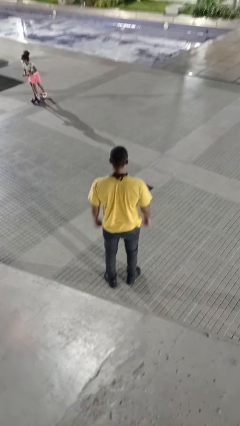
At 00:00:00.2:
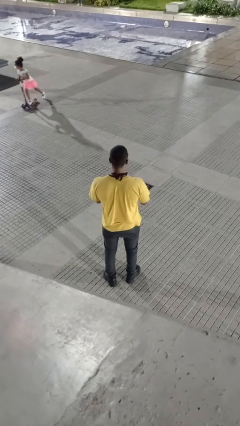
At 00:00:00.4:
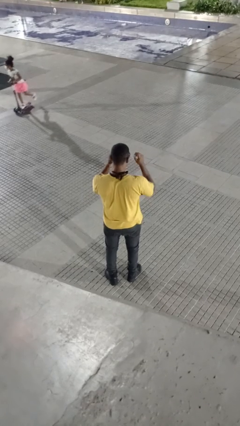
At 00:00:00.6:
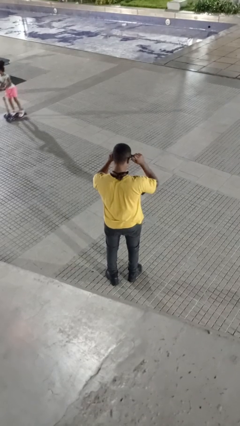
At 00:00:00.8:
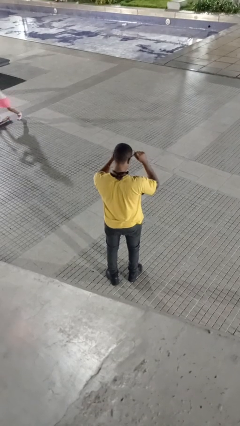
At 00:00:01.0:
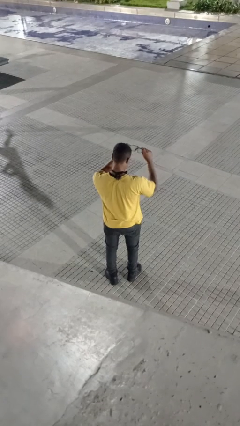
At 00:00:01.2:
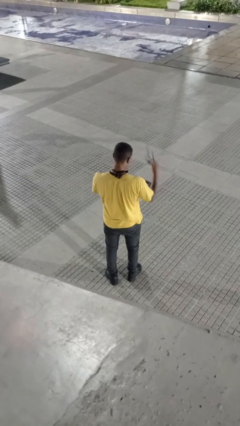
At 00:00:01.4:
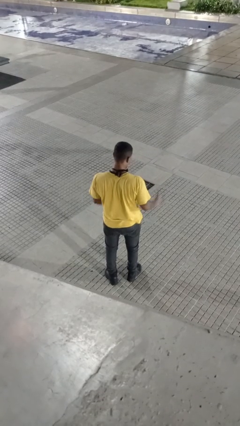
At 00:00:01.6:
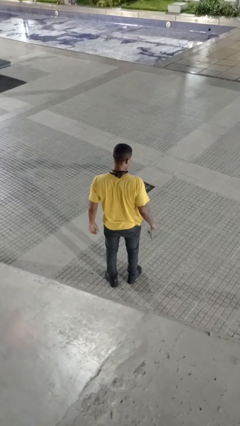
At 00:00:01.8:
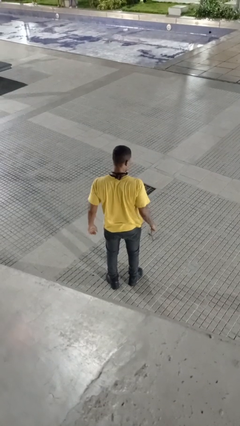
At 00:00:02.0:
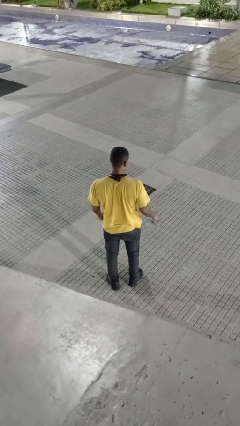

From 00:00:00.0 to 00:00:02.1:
person takes off glasses

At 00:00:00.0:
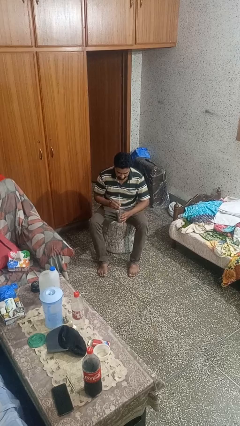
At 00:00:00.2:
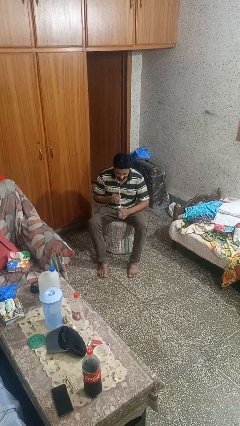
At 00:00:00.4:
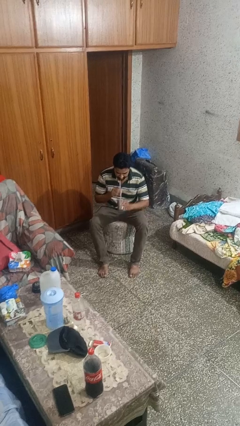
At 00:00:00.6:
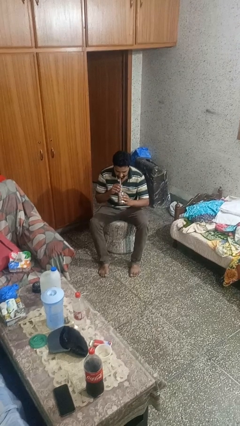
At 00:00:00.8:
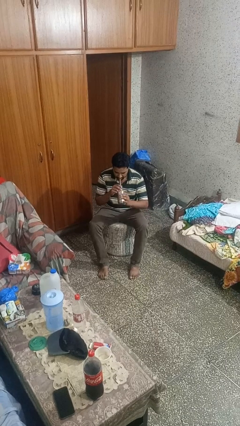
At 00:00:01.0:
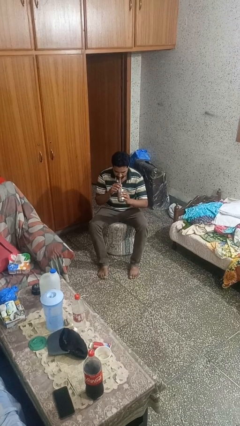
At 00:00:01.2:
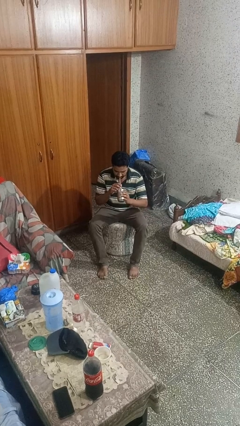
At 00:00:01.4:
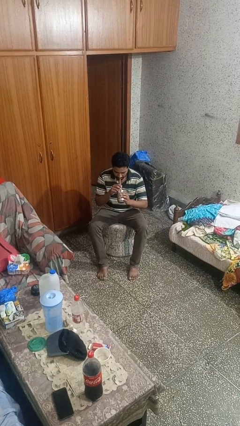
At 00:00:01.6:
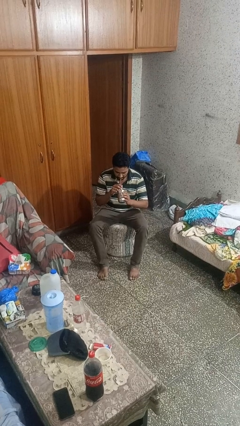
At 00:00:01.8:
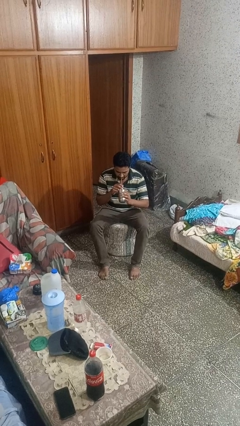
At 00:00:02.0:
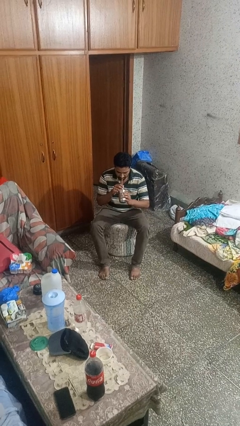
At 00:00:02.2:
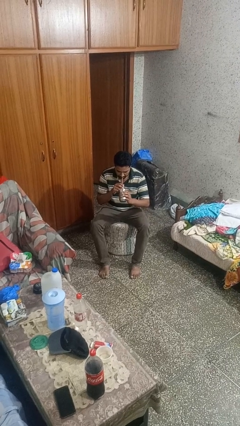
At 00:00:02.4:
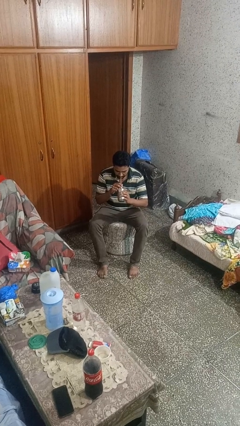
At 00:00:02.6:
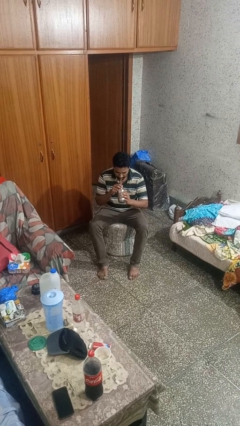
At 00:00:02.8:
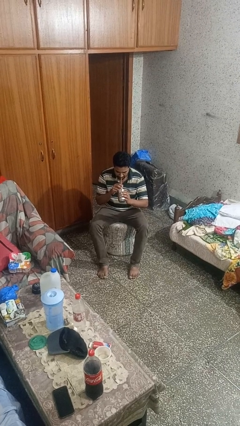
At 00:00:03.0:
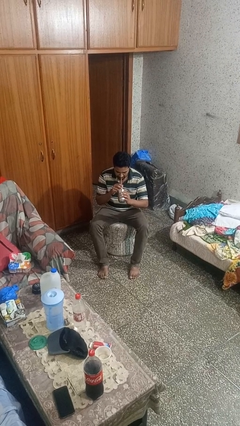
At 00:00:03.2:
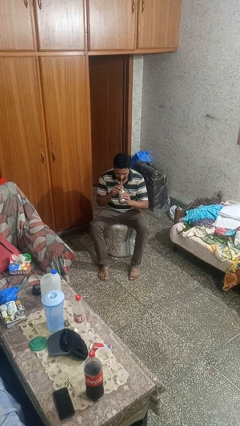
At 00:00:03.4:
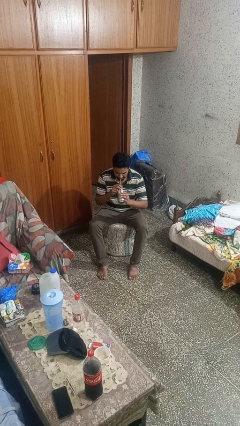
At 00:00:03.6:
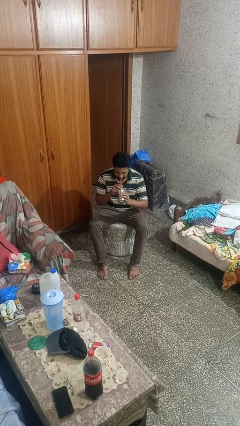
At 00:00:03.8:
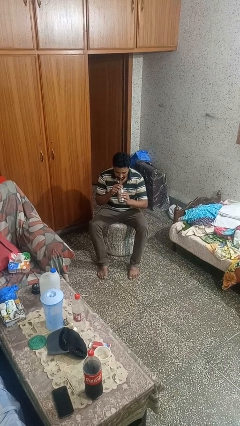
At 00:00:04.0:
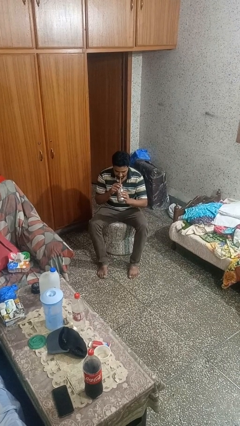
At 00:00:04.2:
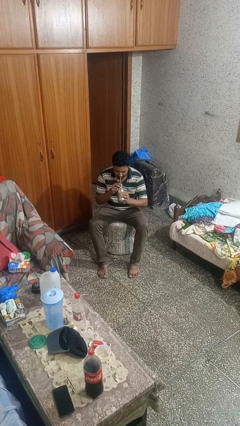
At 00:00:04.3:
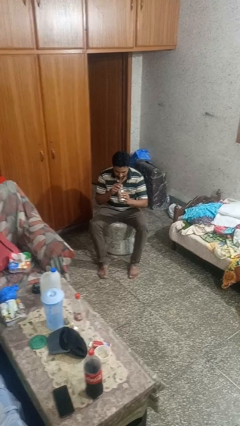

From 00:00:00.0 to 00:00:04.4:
person drinks from straw

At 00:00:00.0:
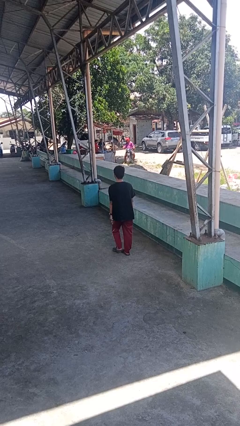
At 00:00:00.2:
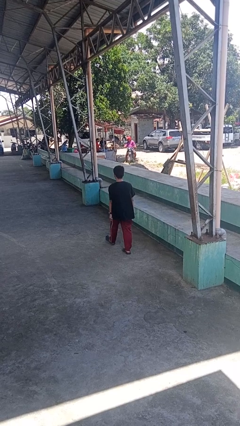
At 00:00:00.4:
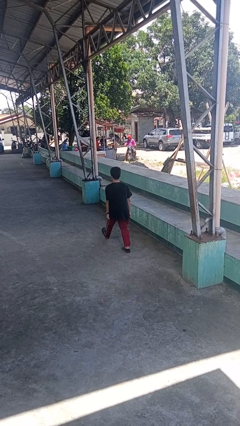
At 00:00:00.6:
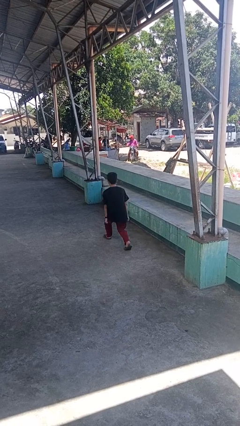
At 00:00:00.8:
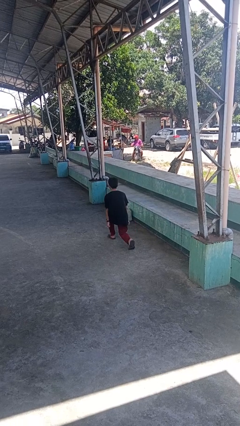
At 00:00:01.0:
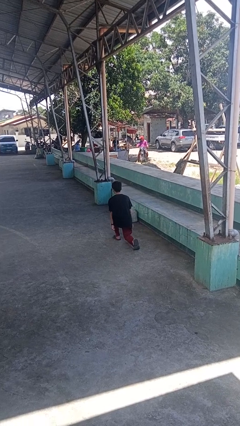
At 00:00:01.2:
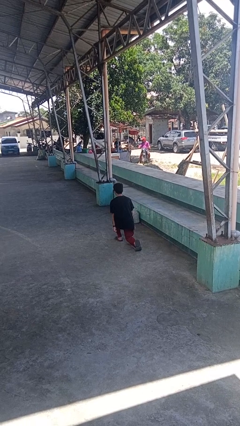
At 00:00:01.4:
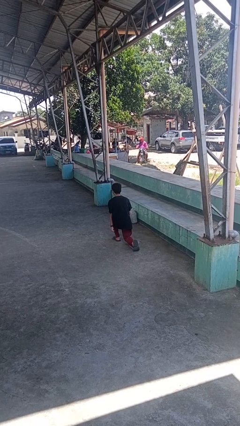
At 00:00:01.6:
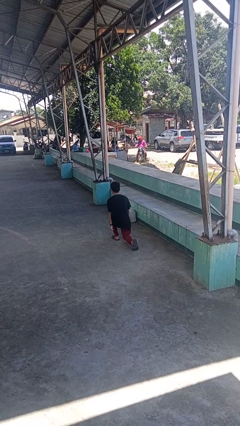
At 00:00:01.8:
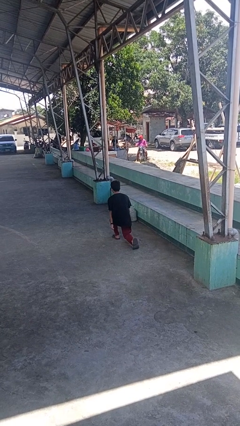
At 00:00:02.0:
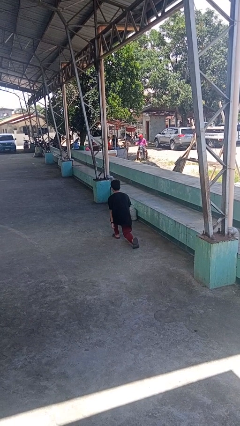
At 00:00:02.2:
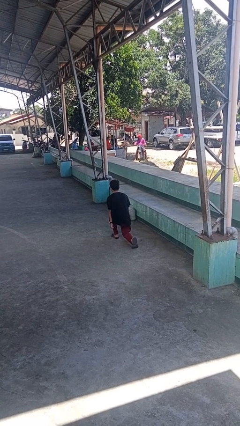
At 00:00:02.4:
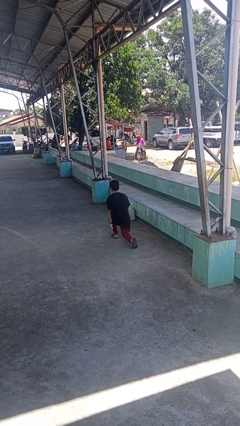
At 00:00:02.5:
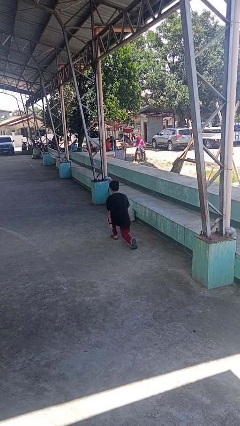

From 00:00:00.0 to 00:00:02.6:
person exercises with lunges

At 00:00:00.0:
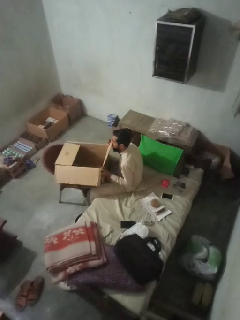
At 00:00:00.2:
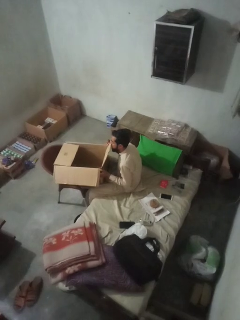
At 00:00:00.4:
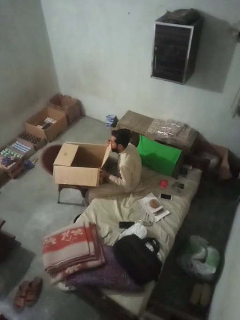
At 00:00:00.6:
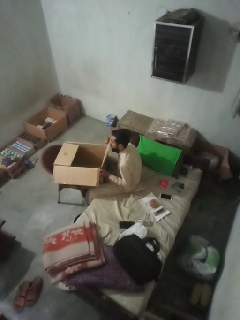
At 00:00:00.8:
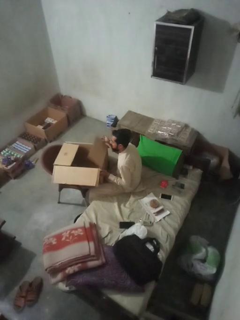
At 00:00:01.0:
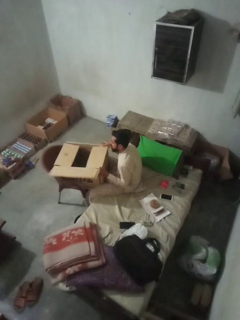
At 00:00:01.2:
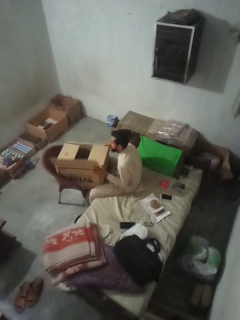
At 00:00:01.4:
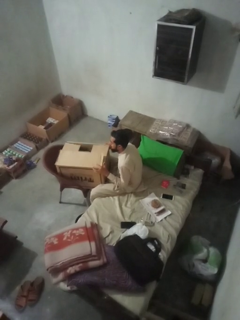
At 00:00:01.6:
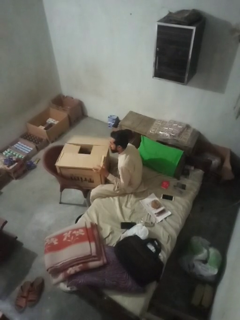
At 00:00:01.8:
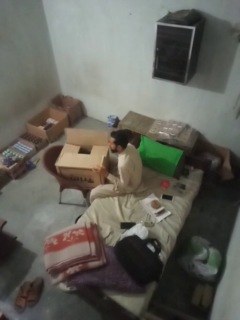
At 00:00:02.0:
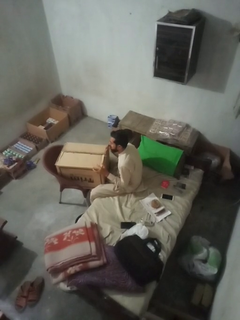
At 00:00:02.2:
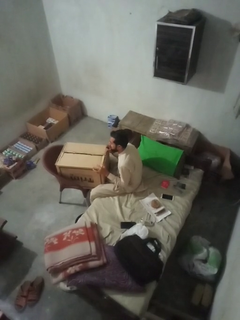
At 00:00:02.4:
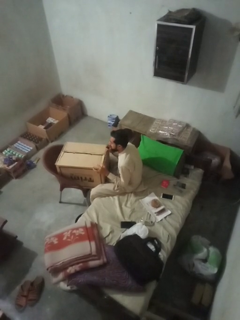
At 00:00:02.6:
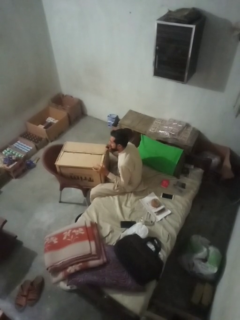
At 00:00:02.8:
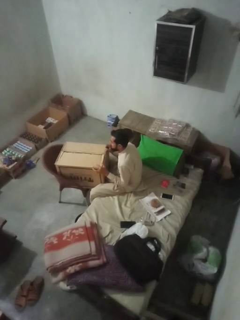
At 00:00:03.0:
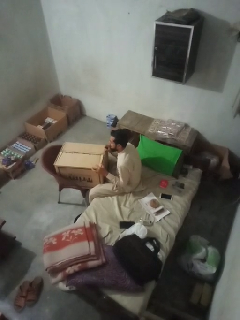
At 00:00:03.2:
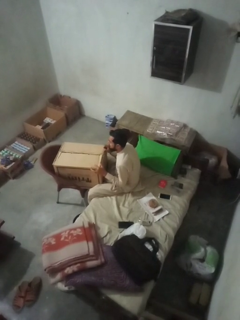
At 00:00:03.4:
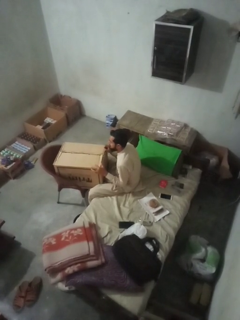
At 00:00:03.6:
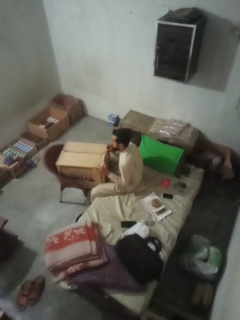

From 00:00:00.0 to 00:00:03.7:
person closes box

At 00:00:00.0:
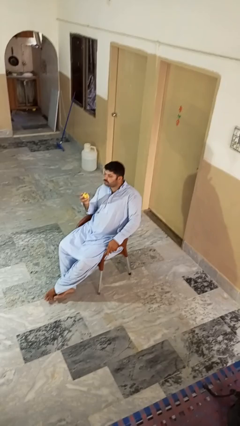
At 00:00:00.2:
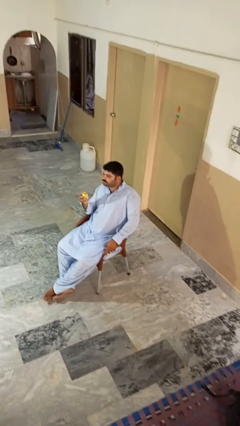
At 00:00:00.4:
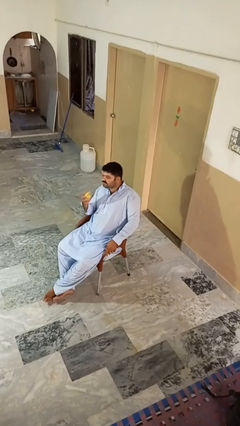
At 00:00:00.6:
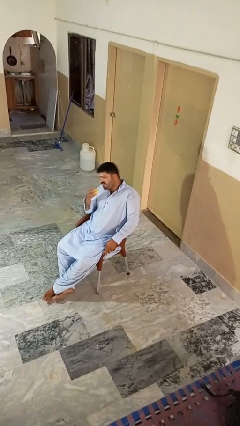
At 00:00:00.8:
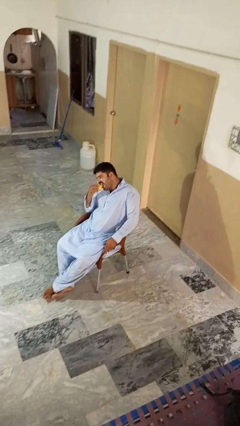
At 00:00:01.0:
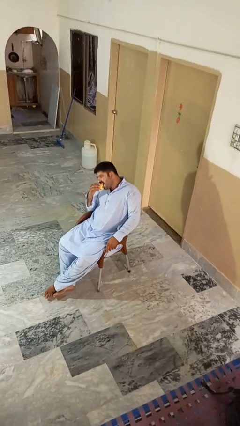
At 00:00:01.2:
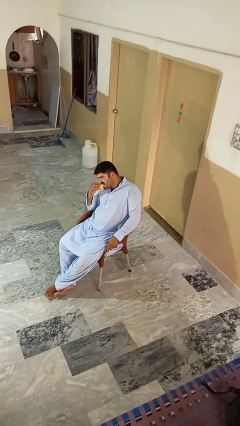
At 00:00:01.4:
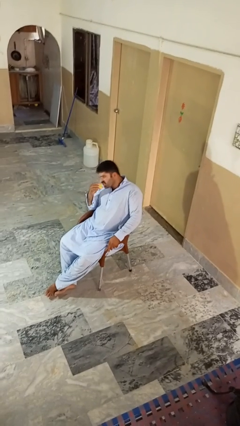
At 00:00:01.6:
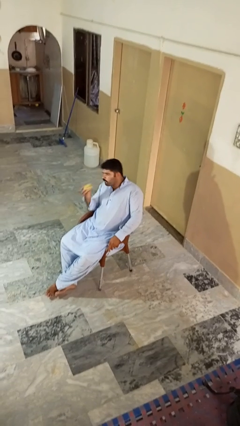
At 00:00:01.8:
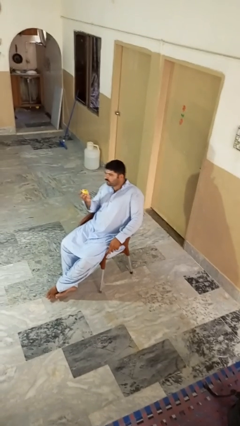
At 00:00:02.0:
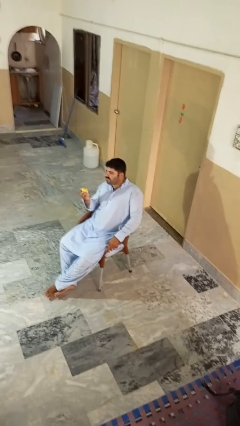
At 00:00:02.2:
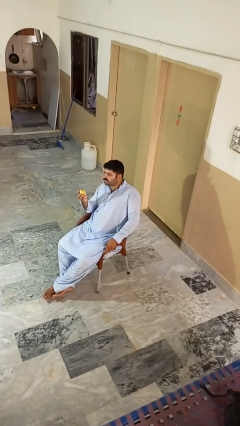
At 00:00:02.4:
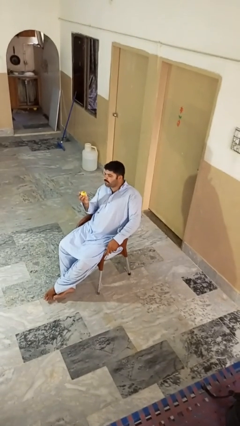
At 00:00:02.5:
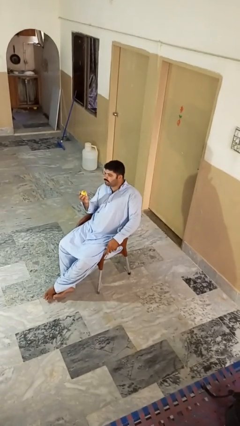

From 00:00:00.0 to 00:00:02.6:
person eats apple

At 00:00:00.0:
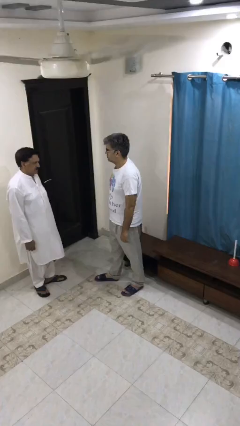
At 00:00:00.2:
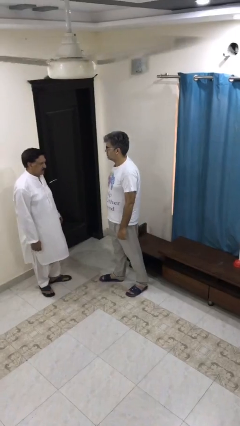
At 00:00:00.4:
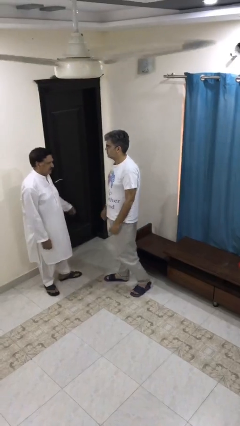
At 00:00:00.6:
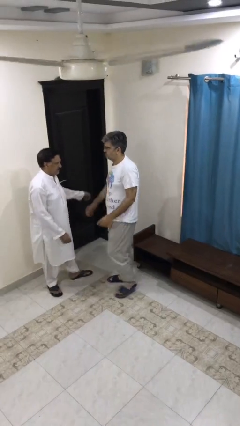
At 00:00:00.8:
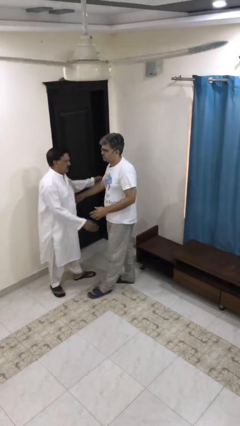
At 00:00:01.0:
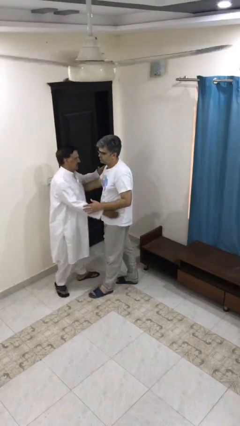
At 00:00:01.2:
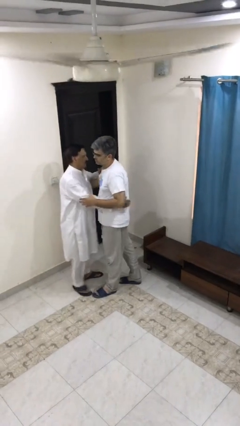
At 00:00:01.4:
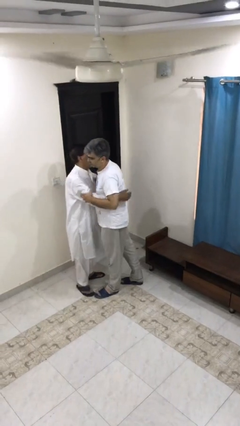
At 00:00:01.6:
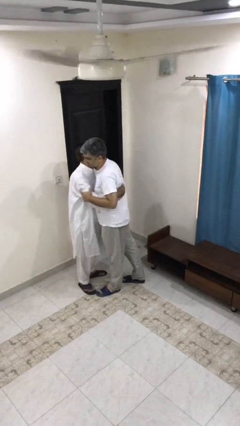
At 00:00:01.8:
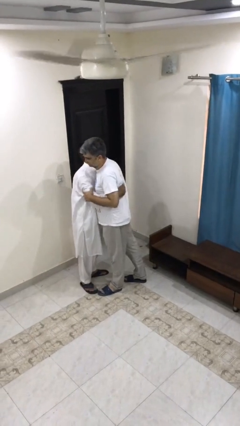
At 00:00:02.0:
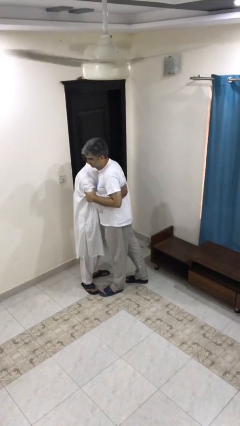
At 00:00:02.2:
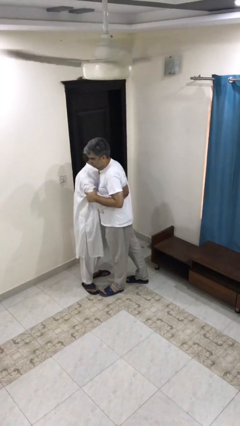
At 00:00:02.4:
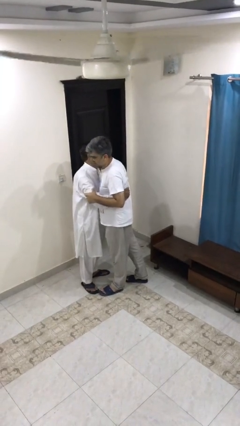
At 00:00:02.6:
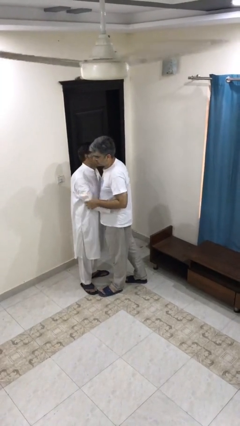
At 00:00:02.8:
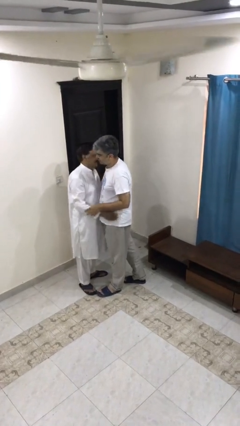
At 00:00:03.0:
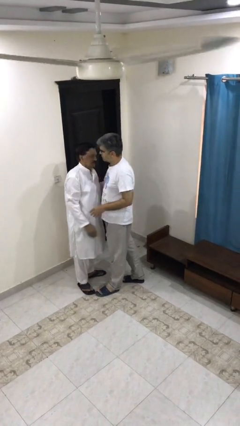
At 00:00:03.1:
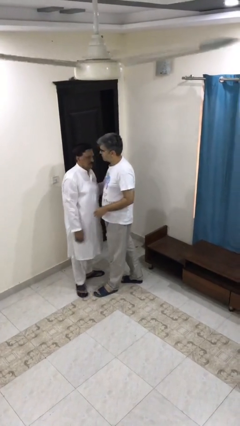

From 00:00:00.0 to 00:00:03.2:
person embraces person
